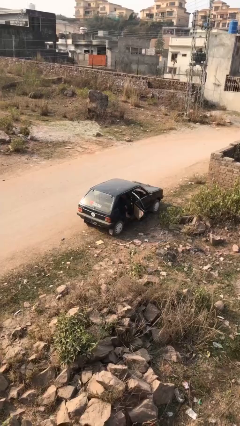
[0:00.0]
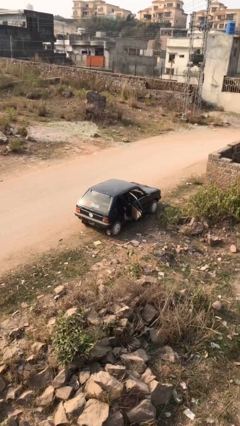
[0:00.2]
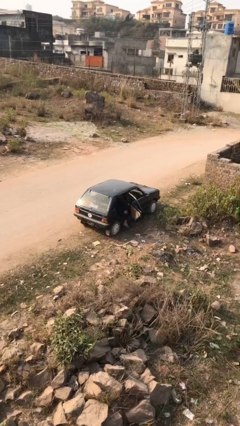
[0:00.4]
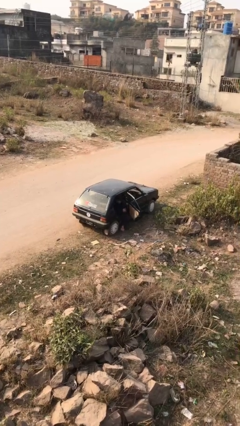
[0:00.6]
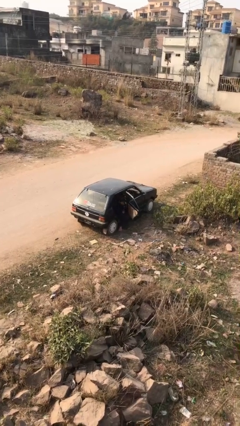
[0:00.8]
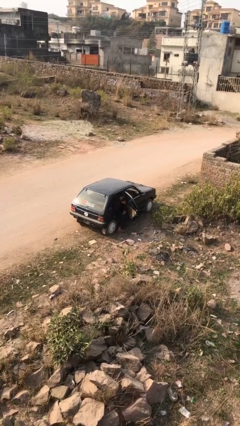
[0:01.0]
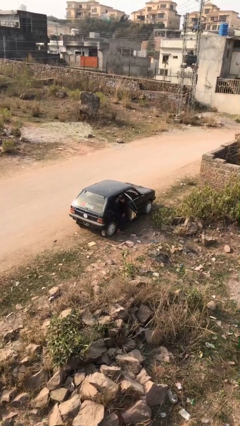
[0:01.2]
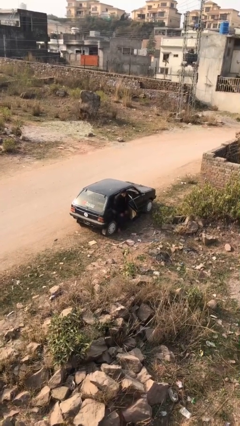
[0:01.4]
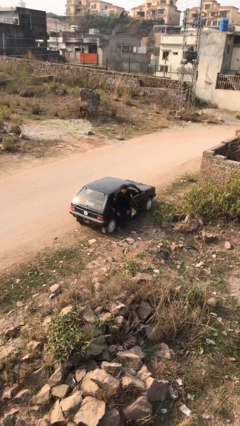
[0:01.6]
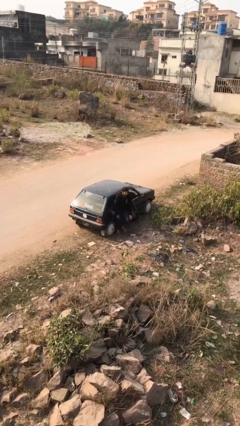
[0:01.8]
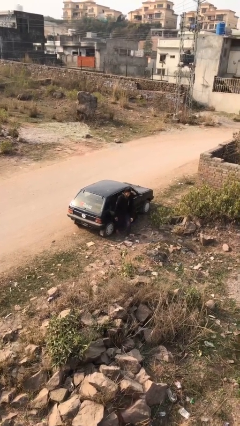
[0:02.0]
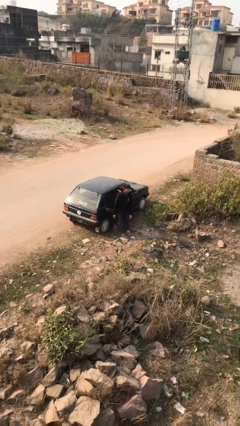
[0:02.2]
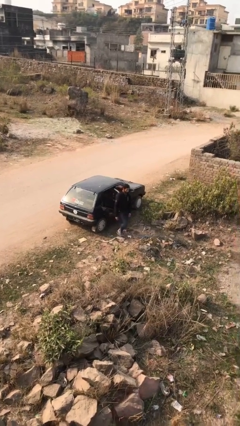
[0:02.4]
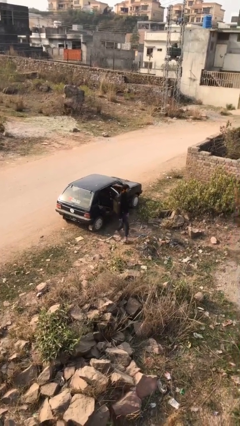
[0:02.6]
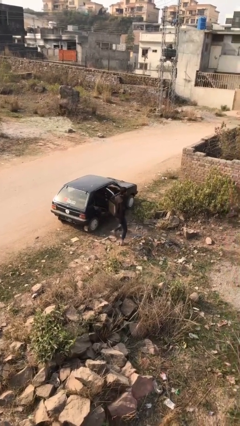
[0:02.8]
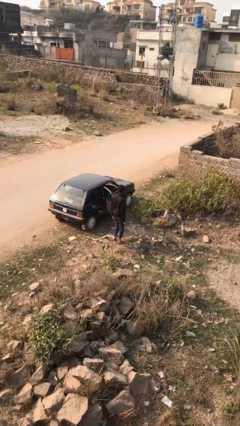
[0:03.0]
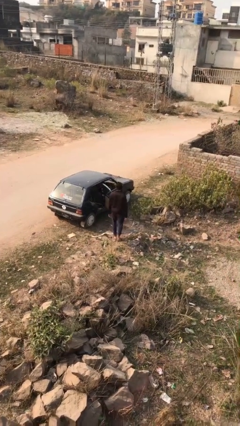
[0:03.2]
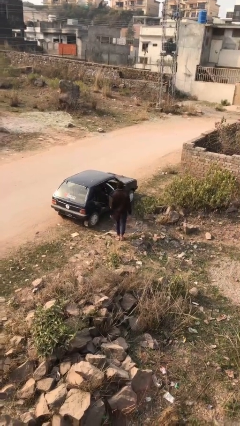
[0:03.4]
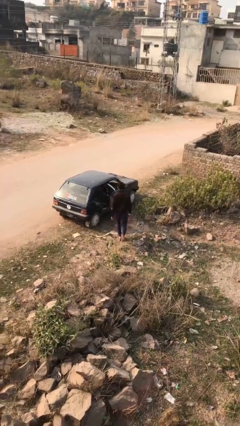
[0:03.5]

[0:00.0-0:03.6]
person exits car

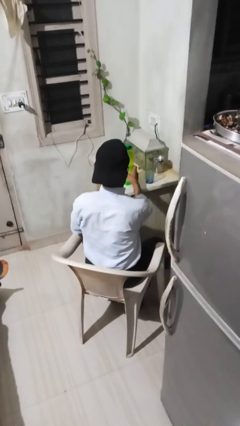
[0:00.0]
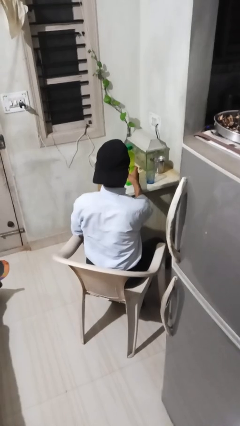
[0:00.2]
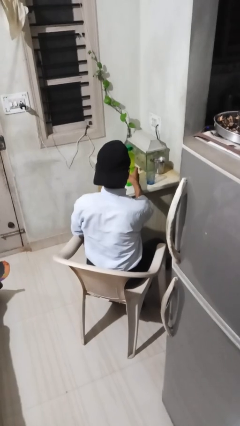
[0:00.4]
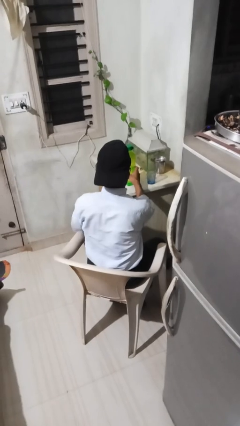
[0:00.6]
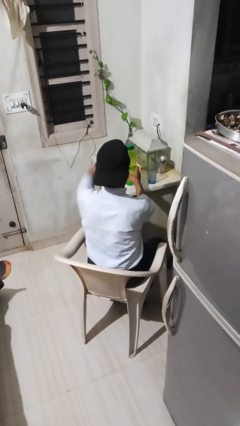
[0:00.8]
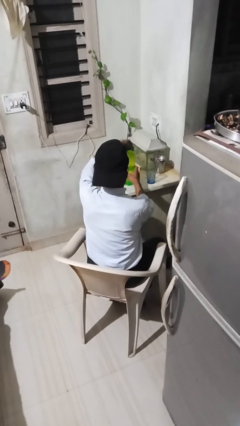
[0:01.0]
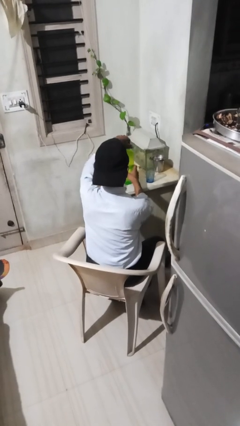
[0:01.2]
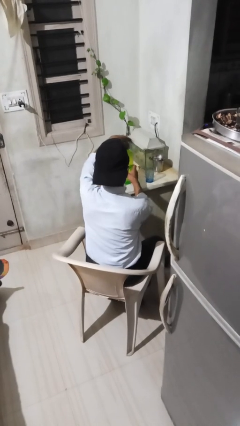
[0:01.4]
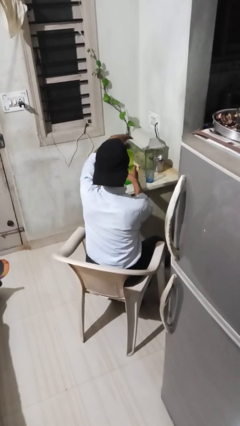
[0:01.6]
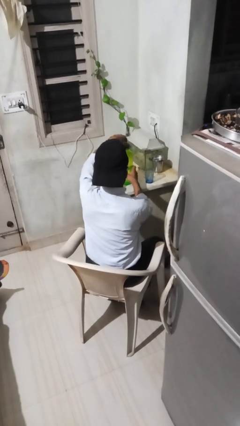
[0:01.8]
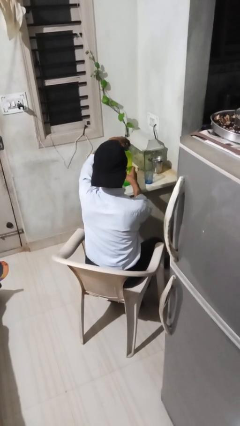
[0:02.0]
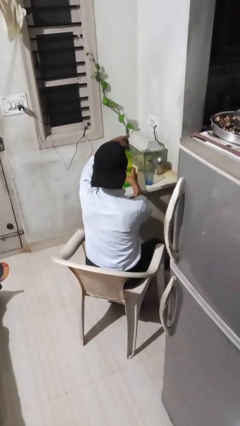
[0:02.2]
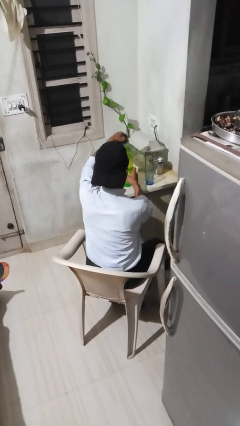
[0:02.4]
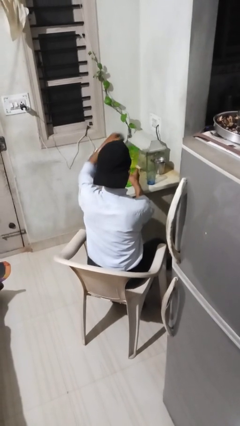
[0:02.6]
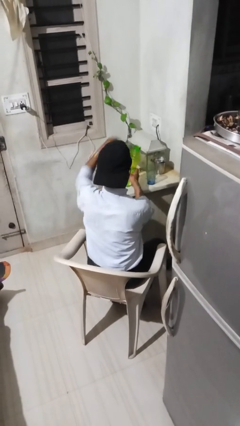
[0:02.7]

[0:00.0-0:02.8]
person unscrews lid from bottle

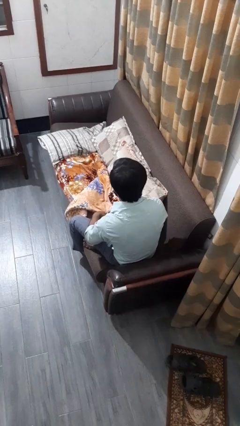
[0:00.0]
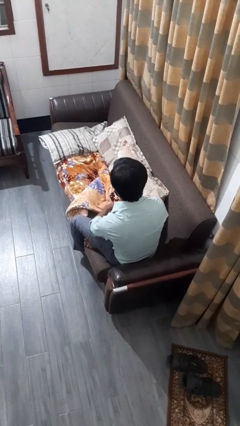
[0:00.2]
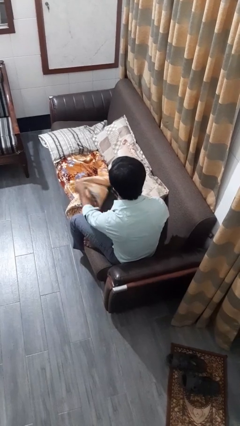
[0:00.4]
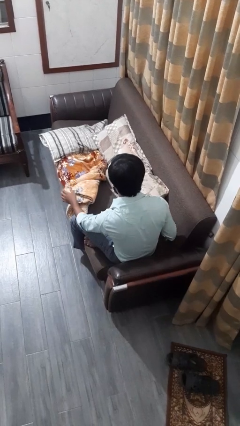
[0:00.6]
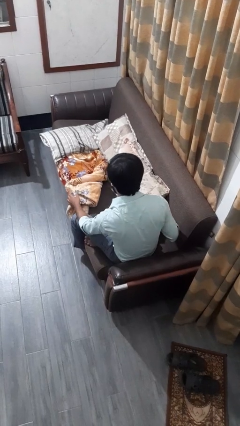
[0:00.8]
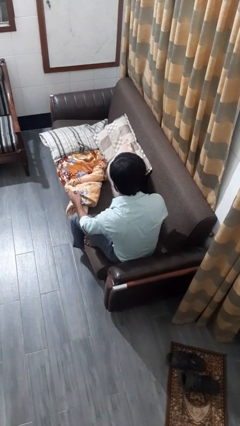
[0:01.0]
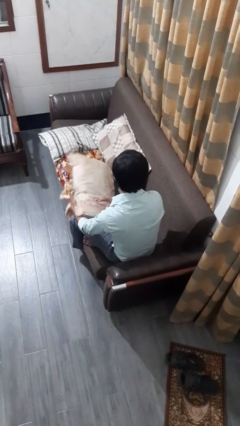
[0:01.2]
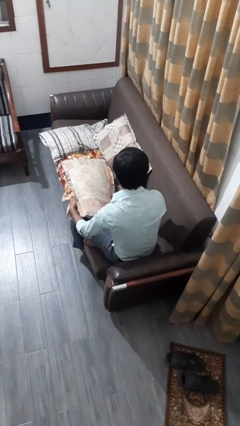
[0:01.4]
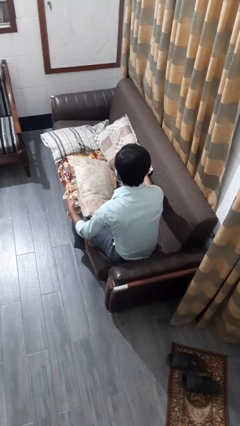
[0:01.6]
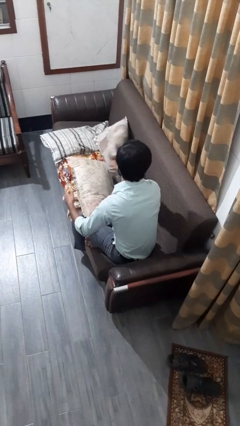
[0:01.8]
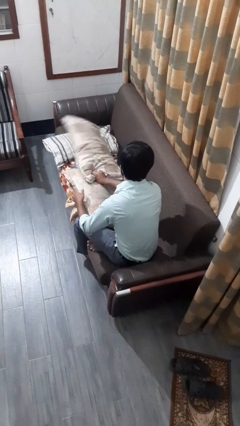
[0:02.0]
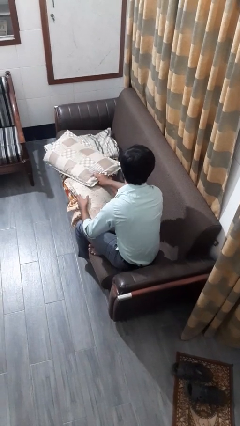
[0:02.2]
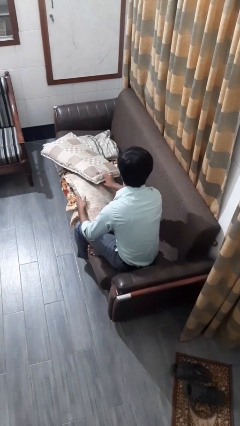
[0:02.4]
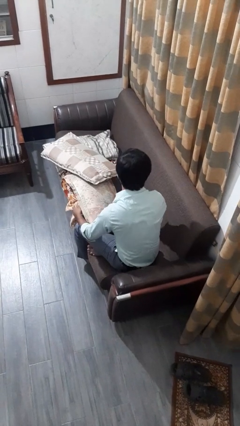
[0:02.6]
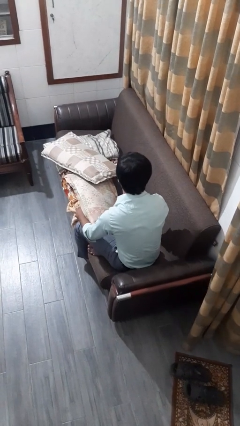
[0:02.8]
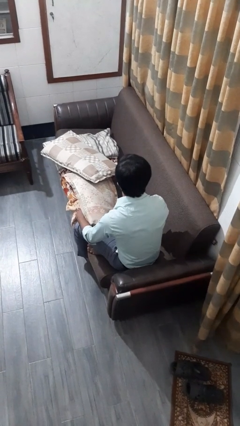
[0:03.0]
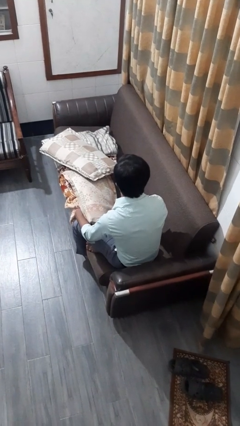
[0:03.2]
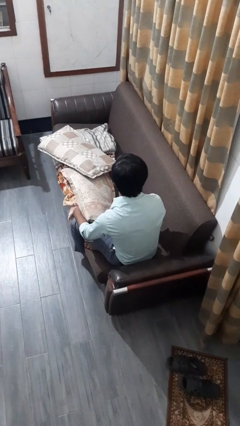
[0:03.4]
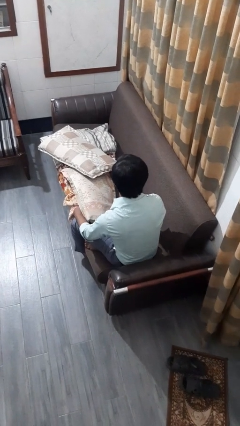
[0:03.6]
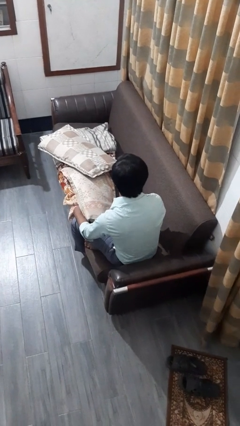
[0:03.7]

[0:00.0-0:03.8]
person searches in couch

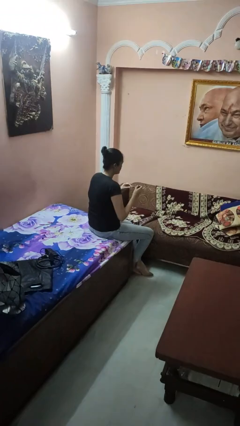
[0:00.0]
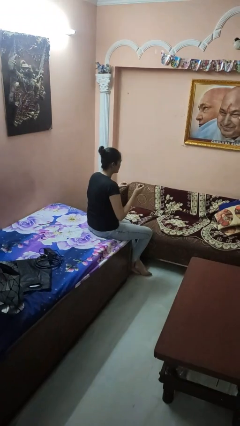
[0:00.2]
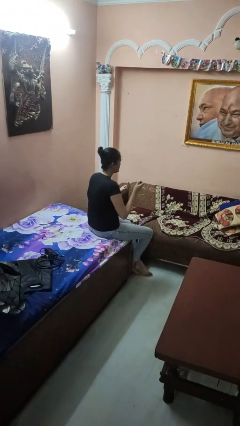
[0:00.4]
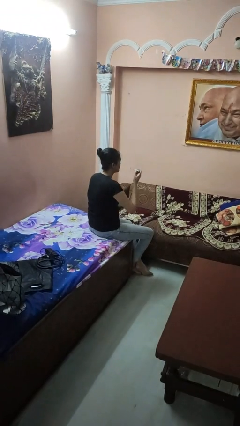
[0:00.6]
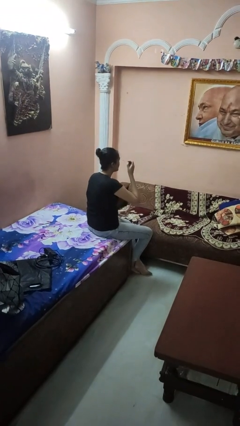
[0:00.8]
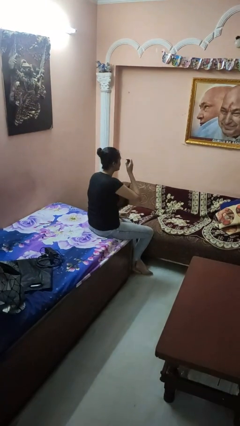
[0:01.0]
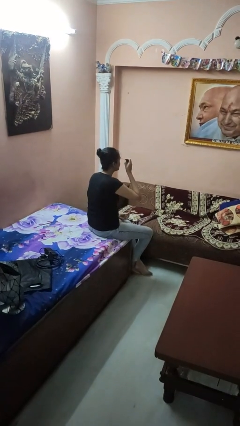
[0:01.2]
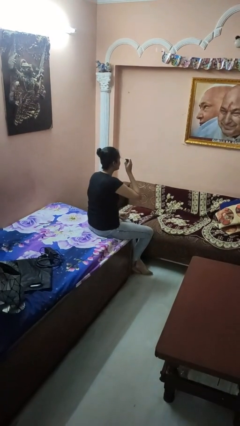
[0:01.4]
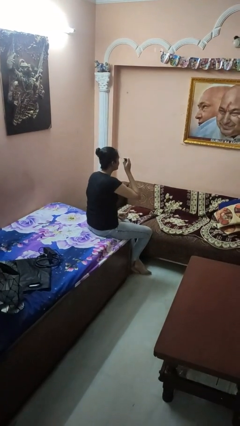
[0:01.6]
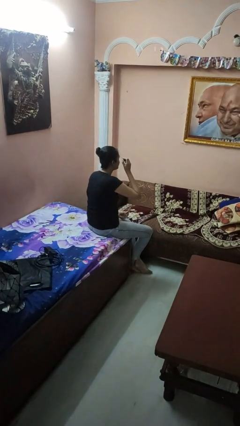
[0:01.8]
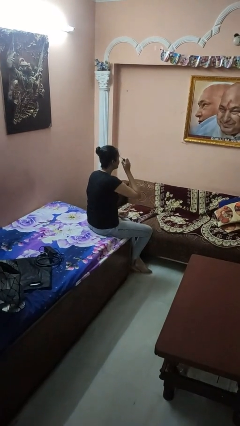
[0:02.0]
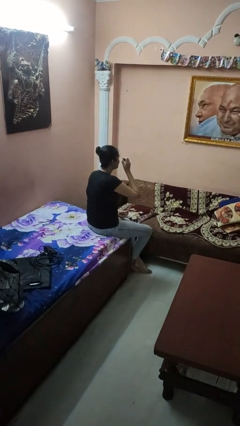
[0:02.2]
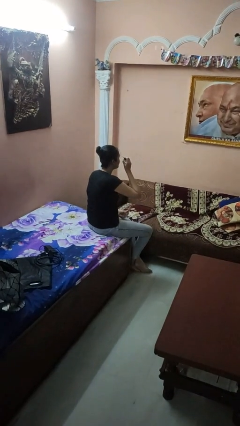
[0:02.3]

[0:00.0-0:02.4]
person applies eye makeup

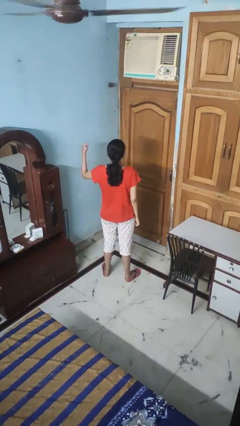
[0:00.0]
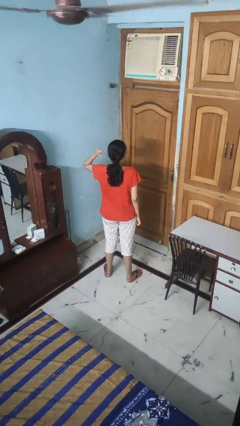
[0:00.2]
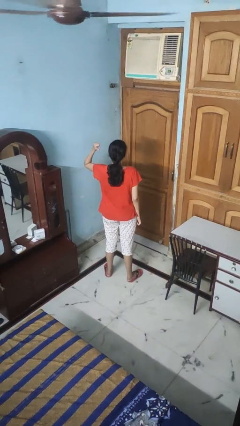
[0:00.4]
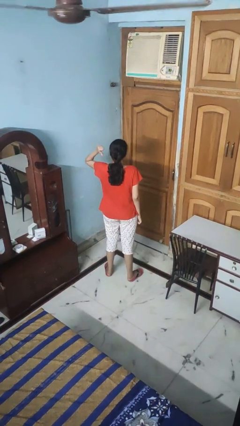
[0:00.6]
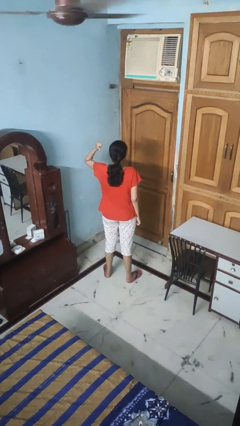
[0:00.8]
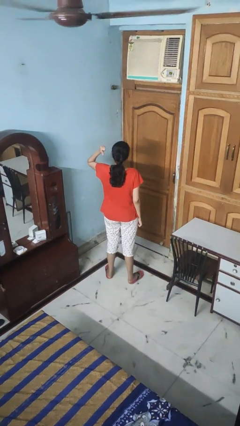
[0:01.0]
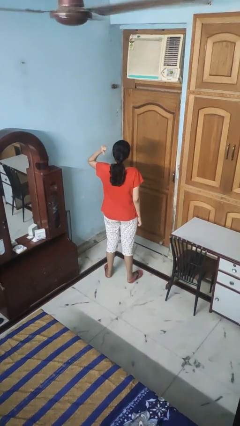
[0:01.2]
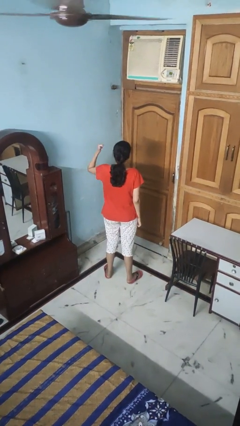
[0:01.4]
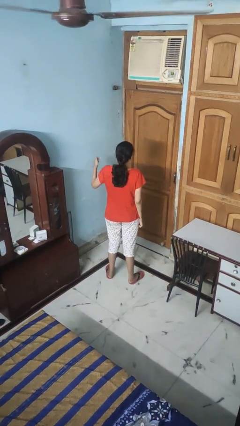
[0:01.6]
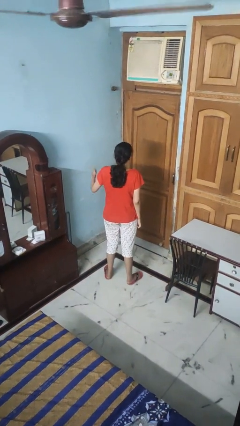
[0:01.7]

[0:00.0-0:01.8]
person gestures behind me

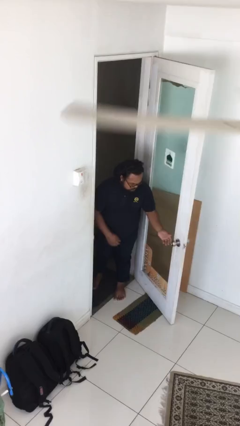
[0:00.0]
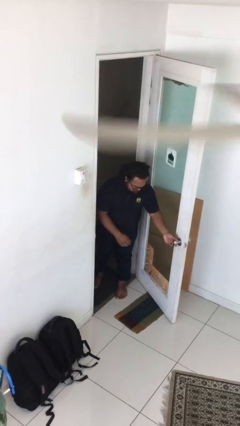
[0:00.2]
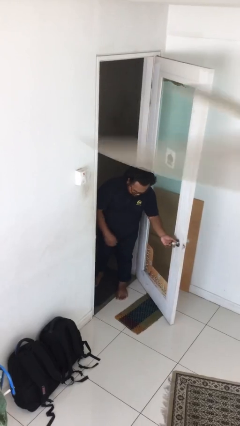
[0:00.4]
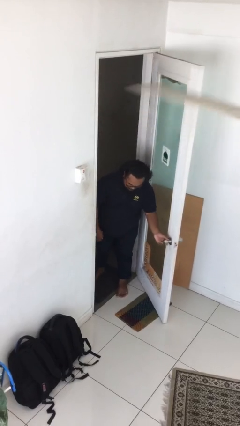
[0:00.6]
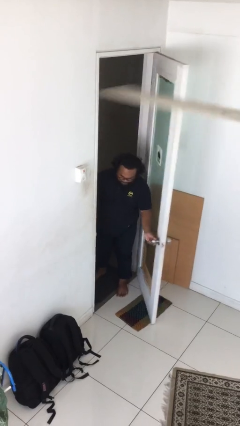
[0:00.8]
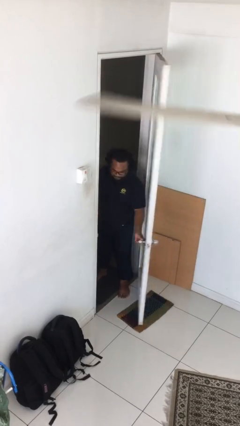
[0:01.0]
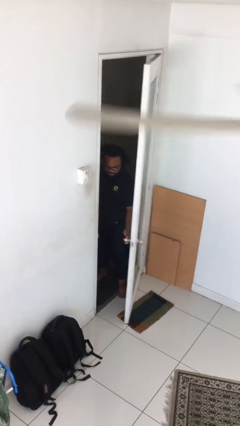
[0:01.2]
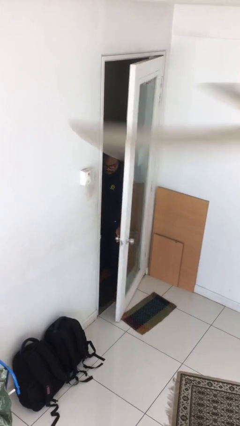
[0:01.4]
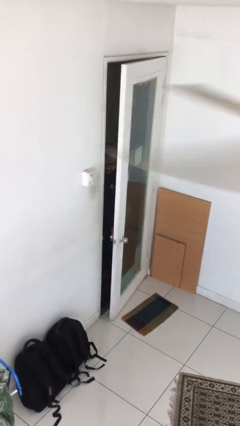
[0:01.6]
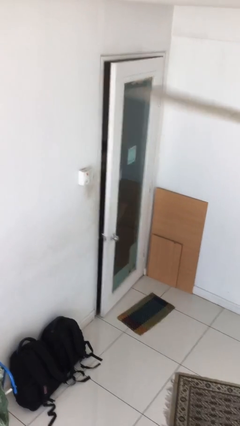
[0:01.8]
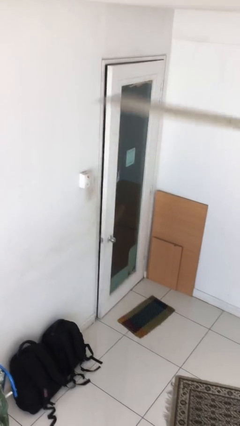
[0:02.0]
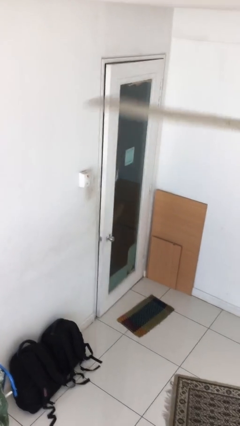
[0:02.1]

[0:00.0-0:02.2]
person closes facility door

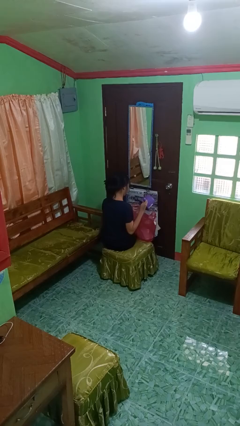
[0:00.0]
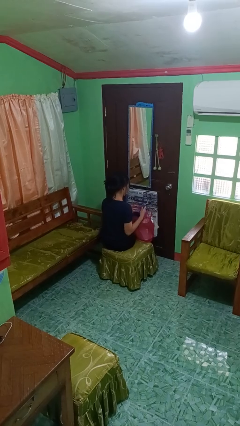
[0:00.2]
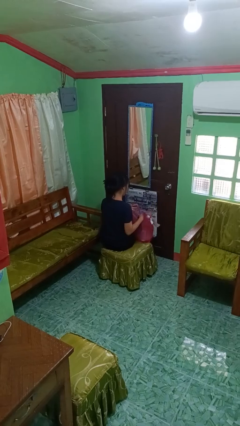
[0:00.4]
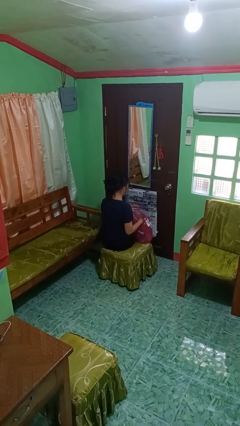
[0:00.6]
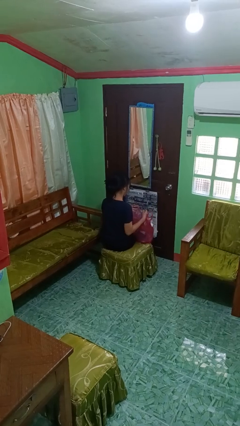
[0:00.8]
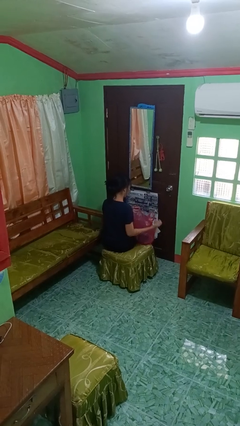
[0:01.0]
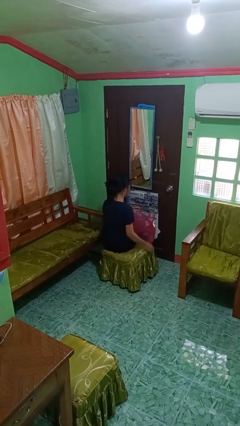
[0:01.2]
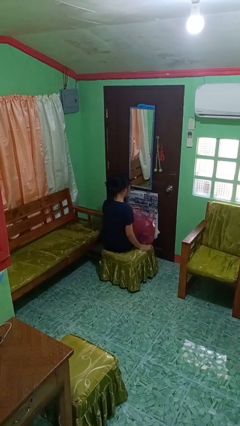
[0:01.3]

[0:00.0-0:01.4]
person puts object into bag
